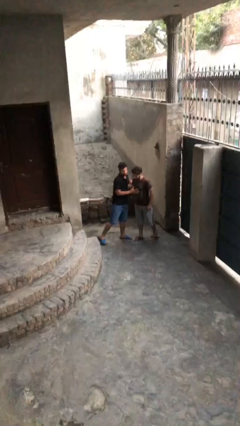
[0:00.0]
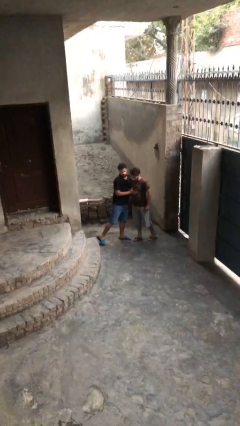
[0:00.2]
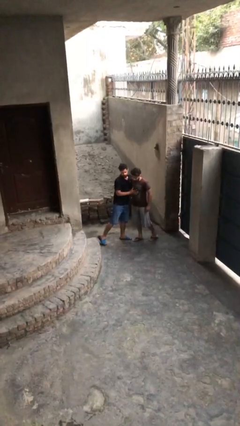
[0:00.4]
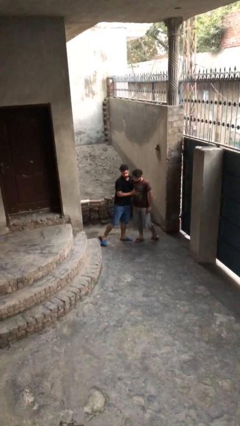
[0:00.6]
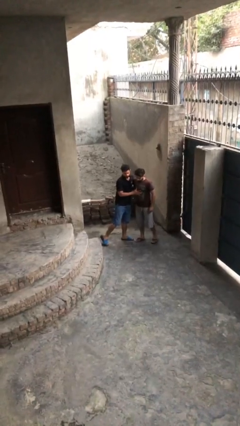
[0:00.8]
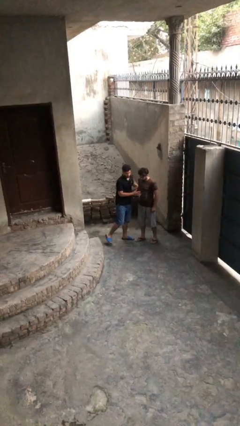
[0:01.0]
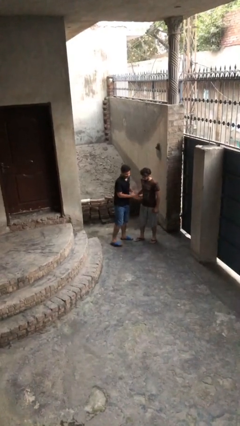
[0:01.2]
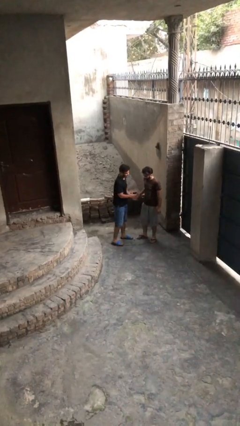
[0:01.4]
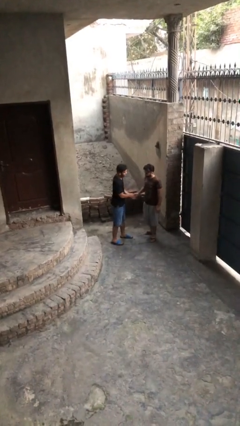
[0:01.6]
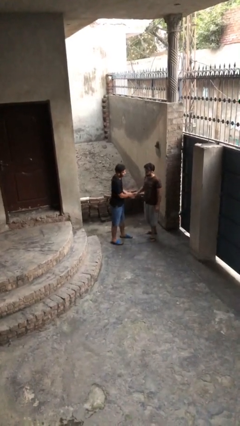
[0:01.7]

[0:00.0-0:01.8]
person embraces person

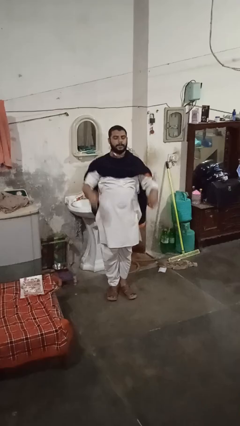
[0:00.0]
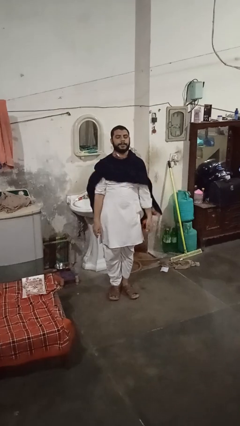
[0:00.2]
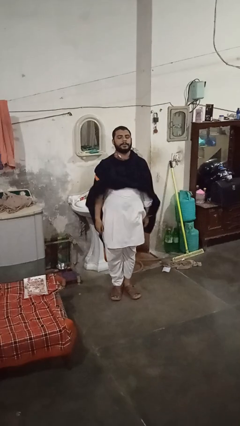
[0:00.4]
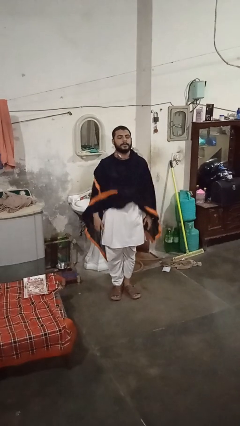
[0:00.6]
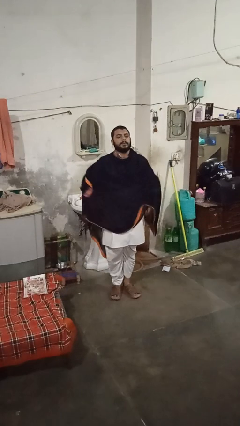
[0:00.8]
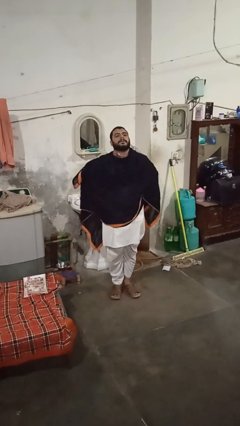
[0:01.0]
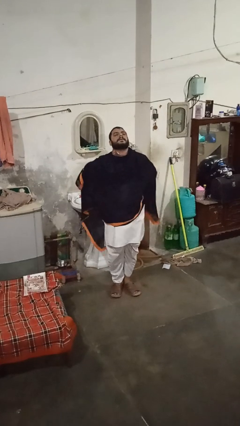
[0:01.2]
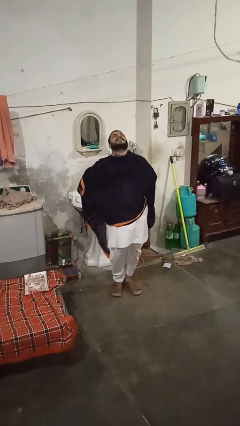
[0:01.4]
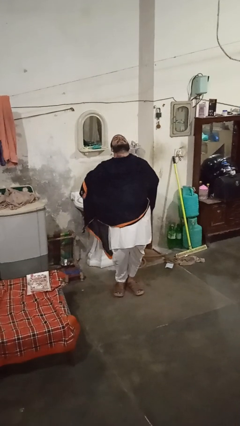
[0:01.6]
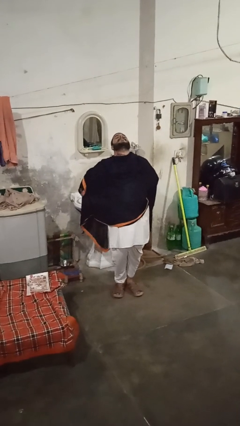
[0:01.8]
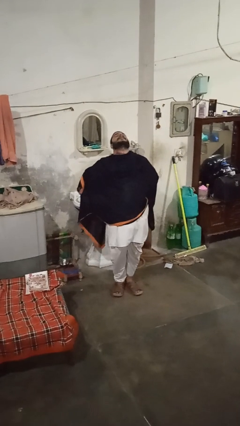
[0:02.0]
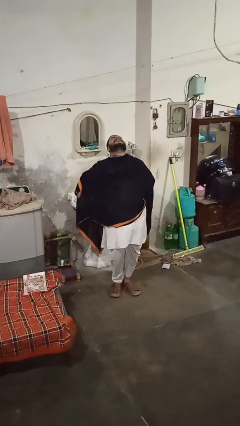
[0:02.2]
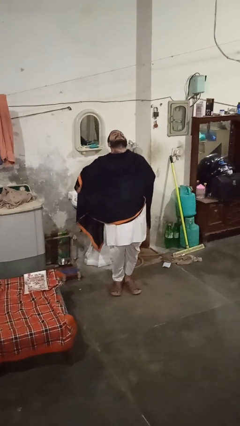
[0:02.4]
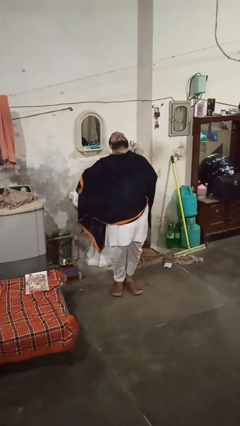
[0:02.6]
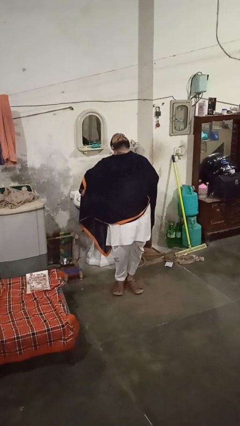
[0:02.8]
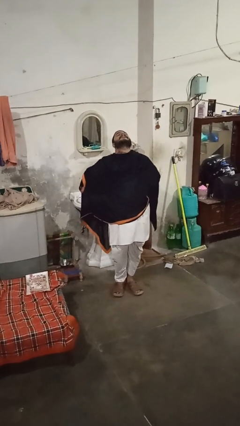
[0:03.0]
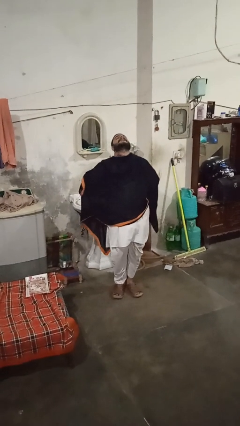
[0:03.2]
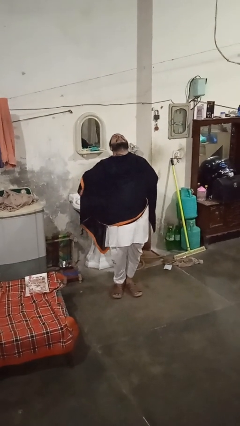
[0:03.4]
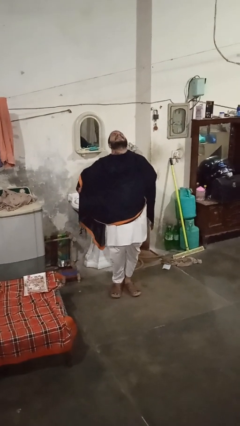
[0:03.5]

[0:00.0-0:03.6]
person stretches back

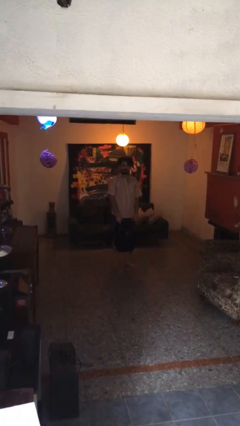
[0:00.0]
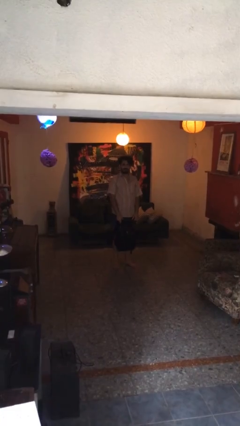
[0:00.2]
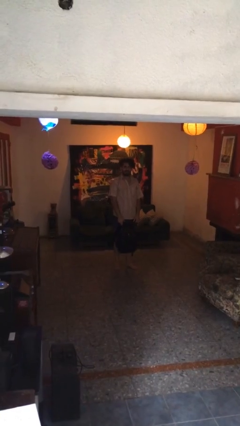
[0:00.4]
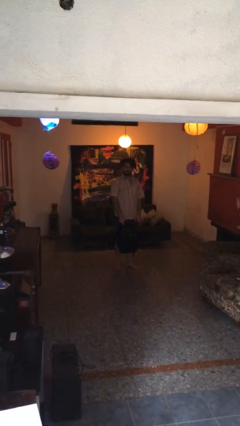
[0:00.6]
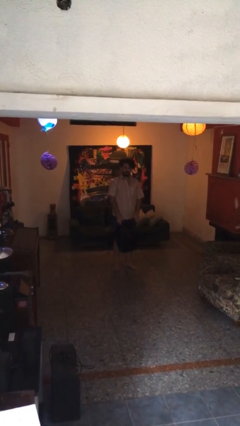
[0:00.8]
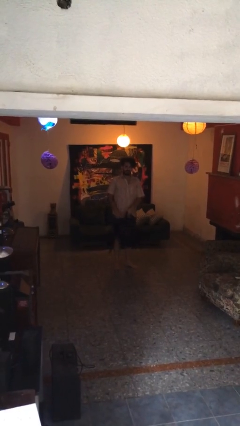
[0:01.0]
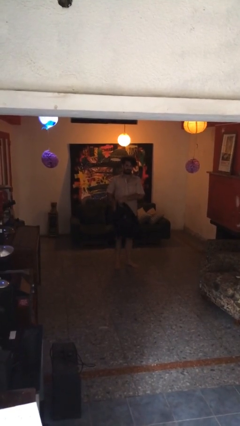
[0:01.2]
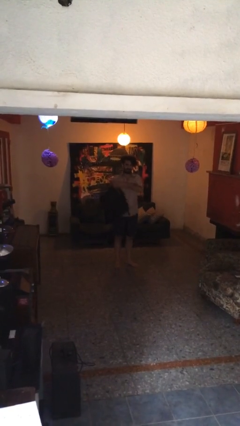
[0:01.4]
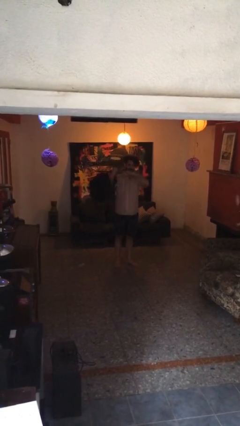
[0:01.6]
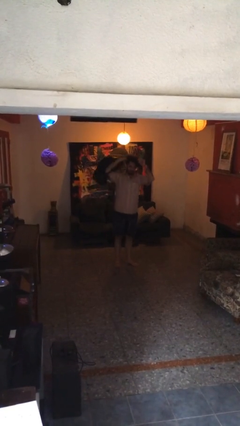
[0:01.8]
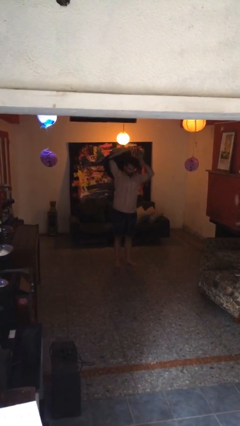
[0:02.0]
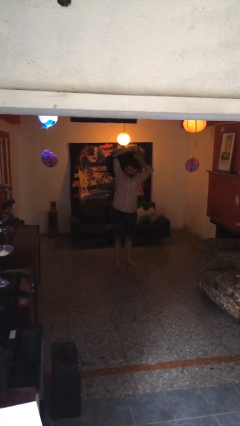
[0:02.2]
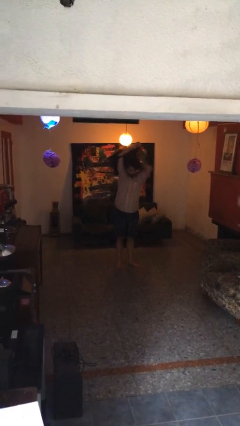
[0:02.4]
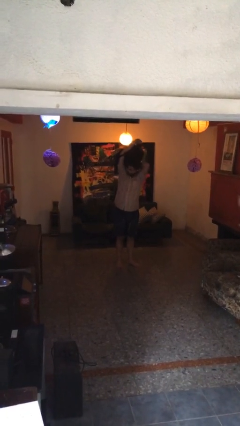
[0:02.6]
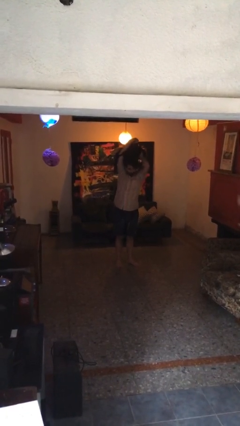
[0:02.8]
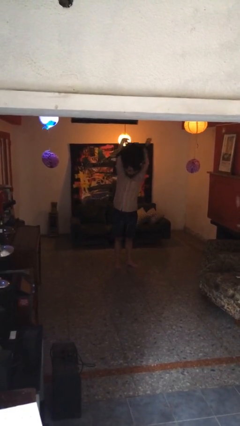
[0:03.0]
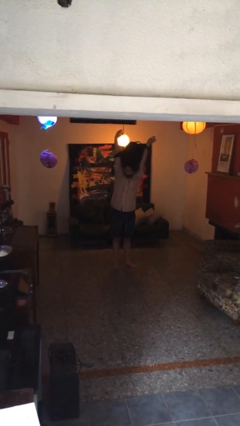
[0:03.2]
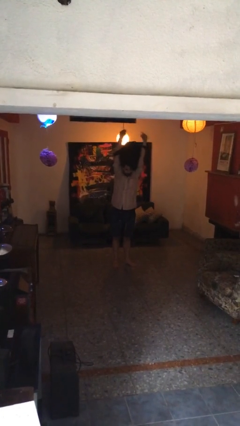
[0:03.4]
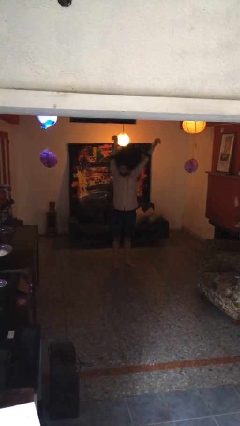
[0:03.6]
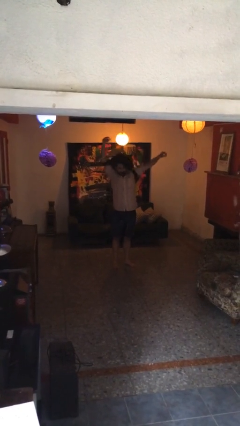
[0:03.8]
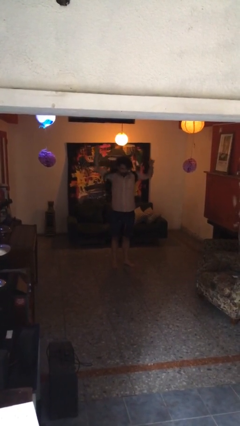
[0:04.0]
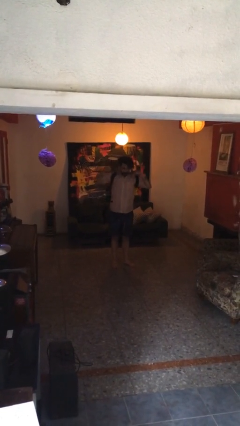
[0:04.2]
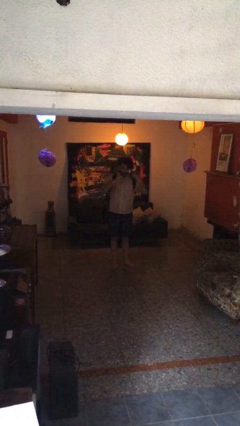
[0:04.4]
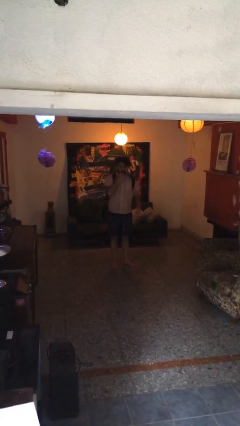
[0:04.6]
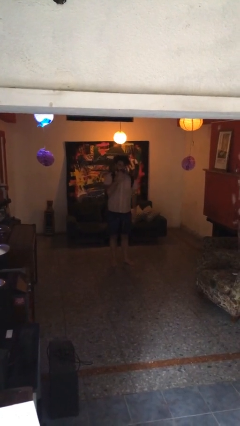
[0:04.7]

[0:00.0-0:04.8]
person puts on backpack

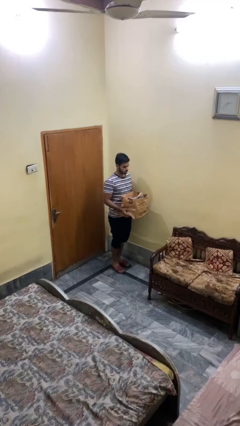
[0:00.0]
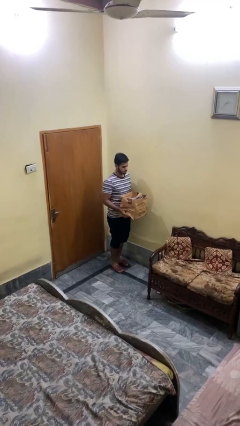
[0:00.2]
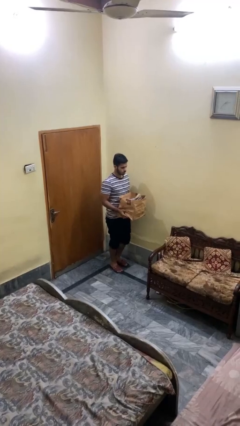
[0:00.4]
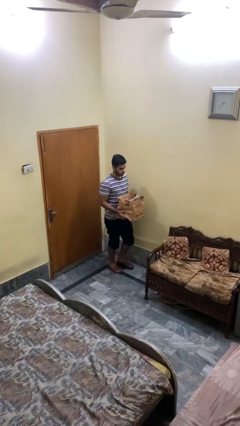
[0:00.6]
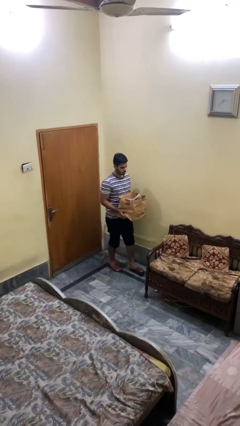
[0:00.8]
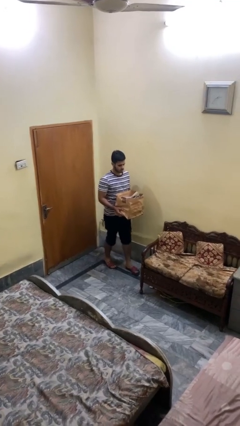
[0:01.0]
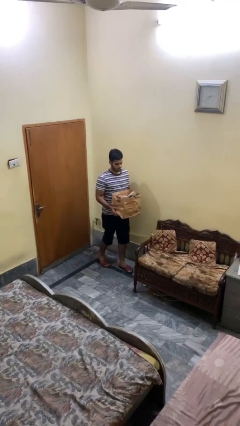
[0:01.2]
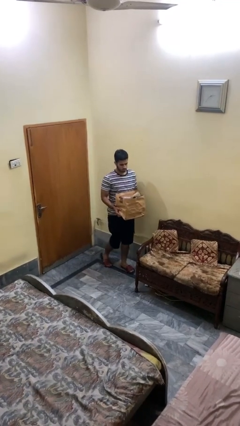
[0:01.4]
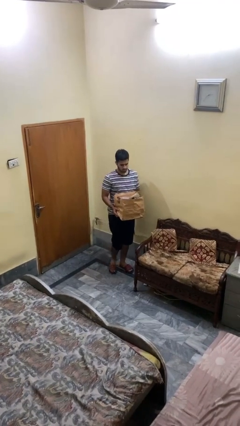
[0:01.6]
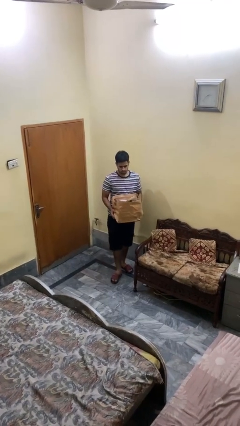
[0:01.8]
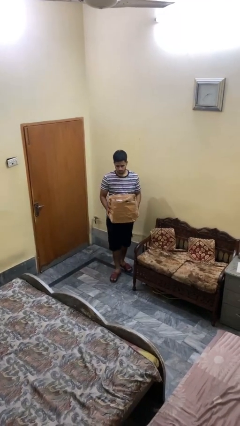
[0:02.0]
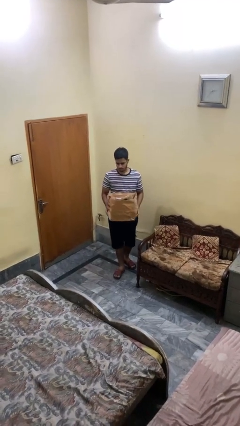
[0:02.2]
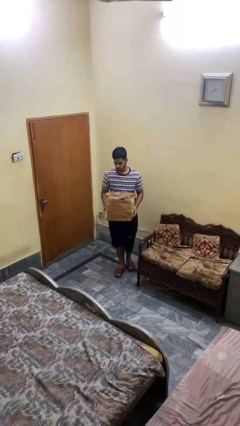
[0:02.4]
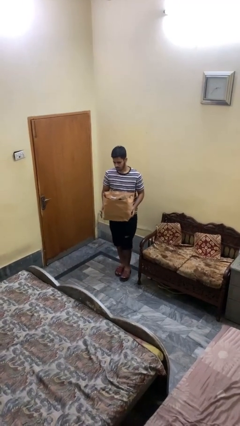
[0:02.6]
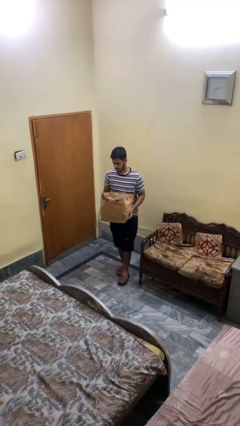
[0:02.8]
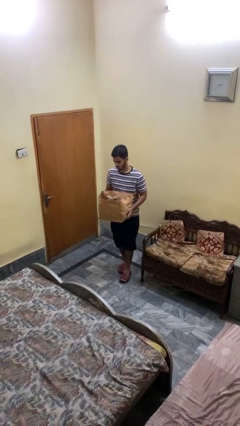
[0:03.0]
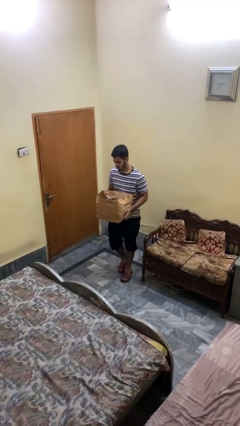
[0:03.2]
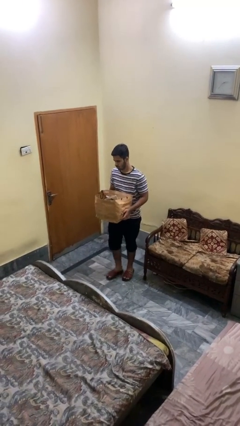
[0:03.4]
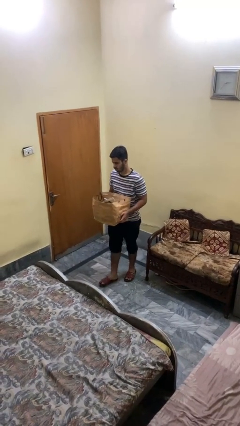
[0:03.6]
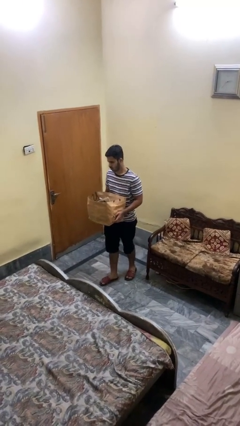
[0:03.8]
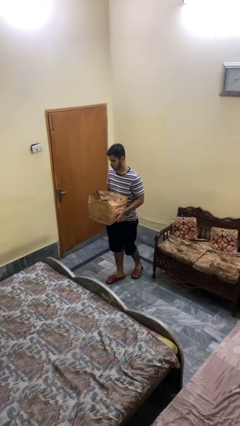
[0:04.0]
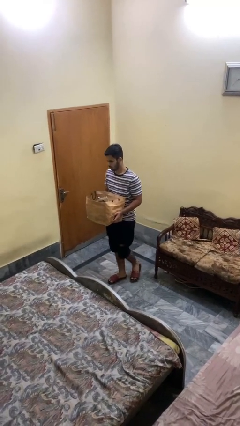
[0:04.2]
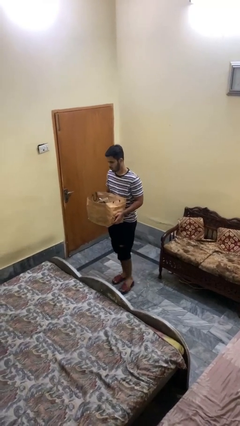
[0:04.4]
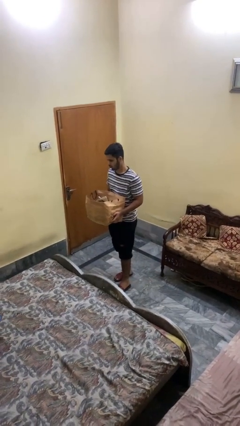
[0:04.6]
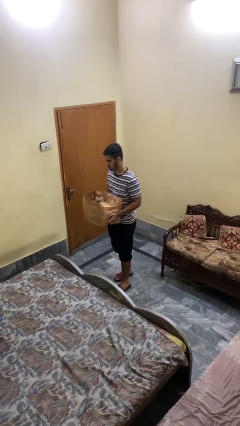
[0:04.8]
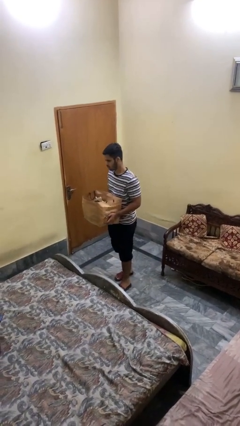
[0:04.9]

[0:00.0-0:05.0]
person carries groceries

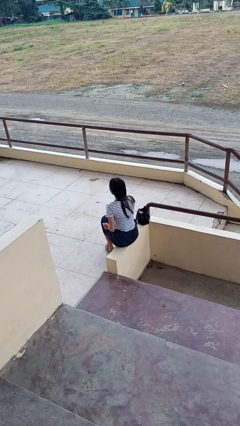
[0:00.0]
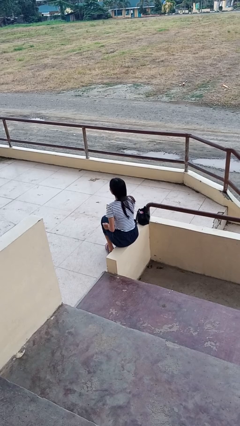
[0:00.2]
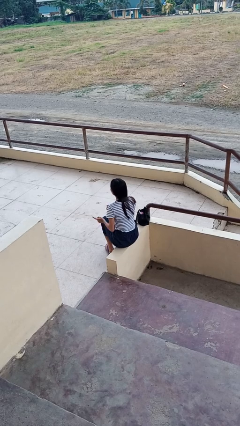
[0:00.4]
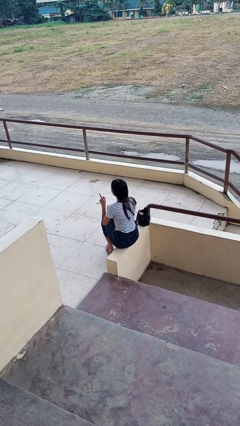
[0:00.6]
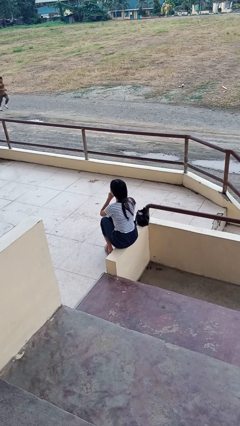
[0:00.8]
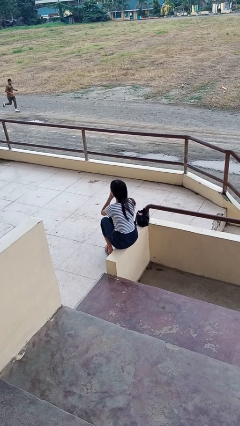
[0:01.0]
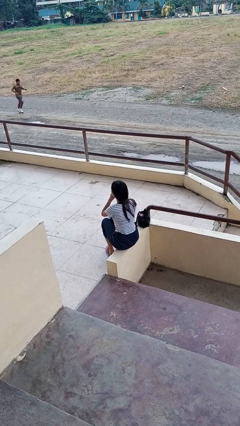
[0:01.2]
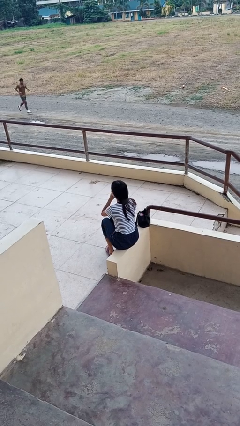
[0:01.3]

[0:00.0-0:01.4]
person gestures be quiet

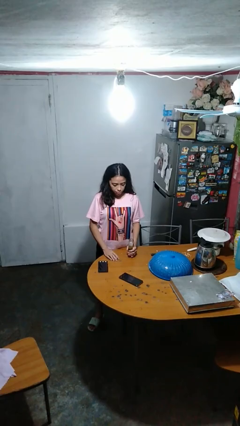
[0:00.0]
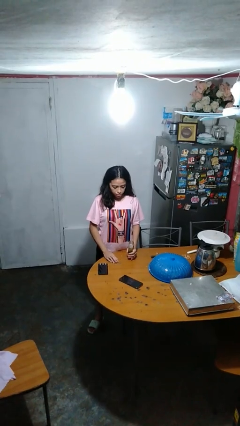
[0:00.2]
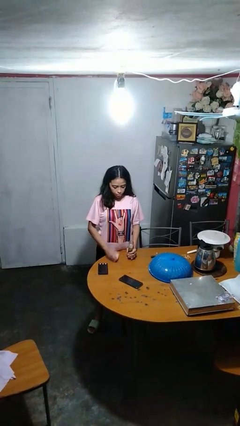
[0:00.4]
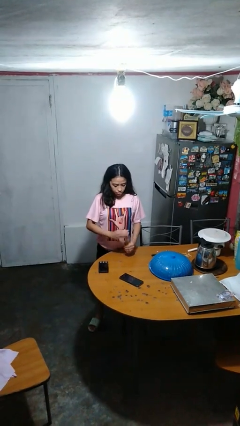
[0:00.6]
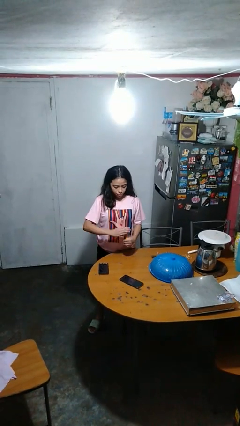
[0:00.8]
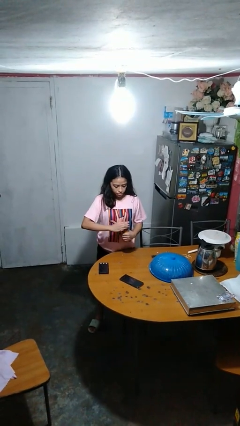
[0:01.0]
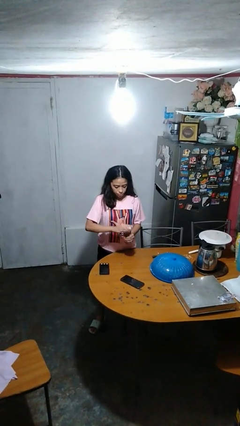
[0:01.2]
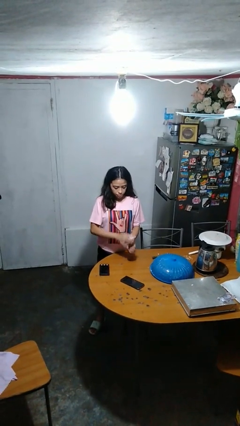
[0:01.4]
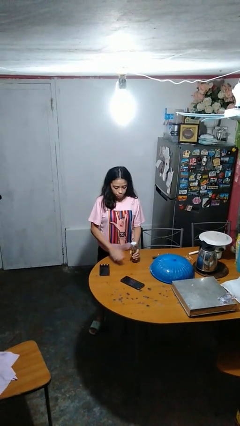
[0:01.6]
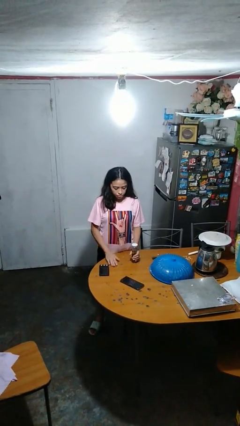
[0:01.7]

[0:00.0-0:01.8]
person closes jar
